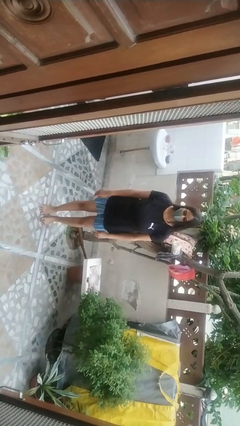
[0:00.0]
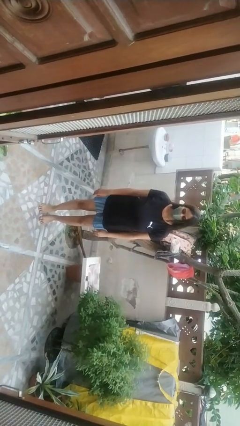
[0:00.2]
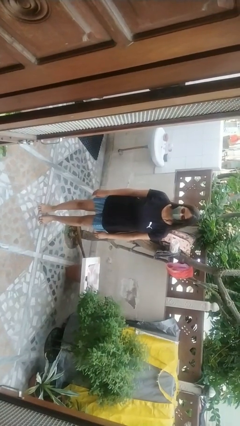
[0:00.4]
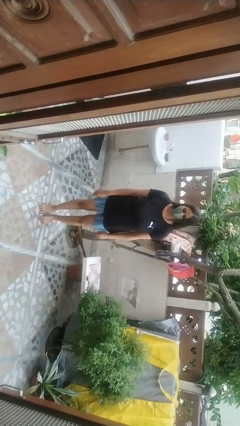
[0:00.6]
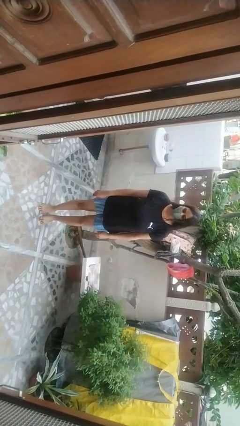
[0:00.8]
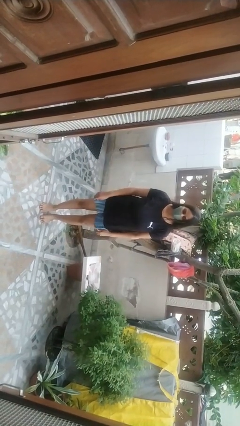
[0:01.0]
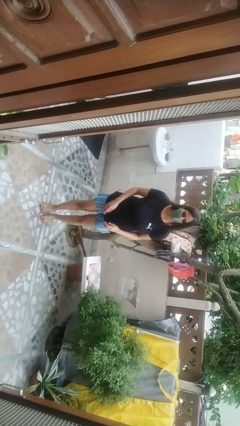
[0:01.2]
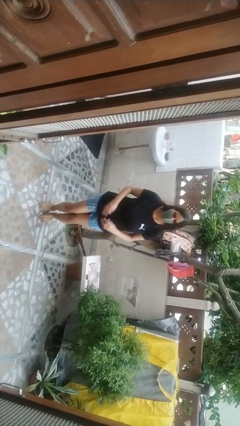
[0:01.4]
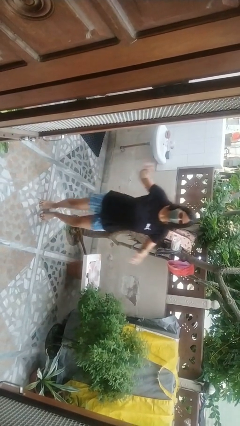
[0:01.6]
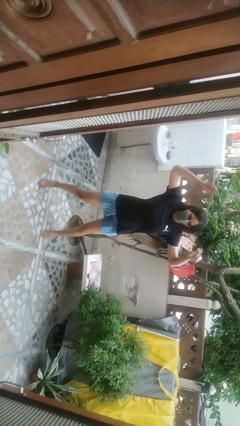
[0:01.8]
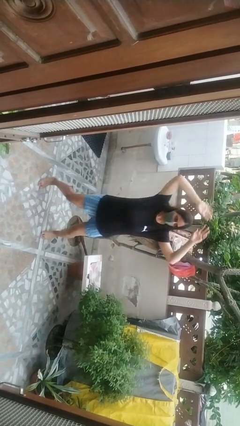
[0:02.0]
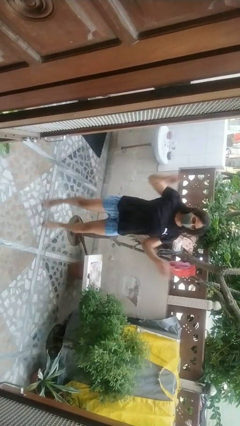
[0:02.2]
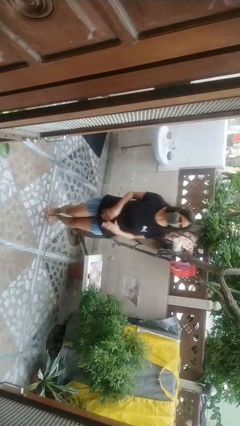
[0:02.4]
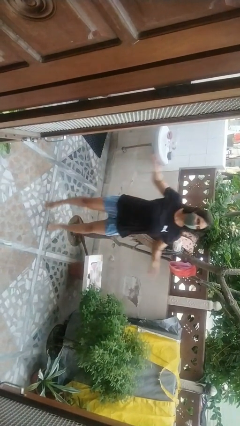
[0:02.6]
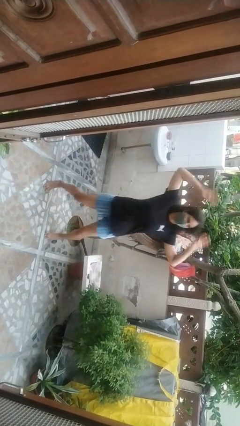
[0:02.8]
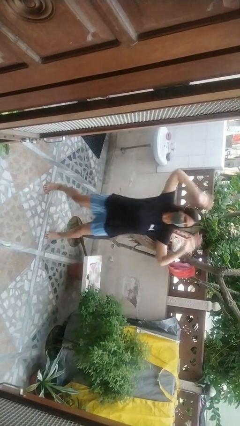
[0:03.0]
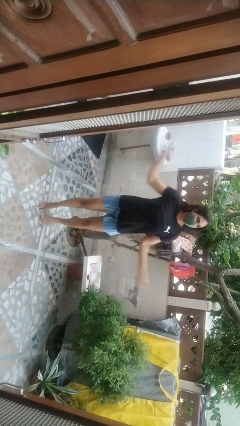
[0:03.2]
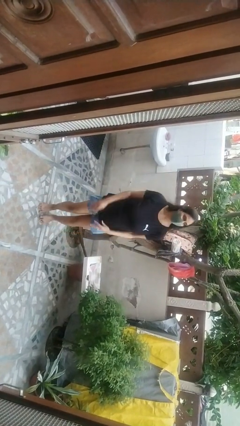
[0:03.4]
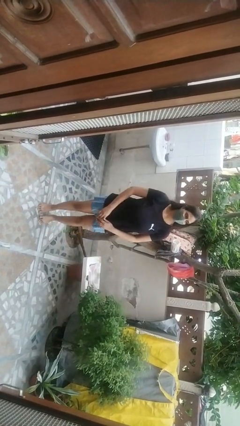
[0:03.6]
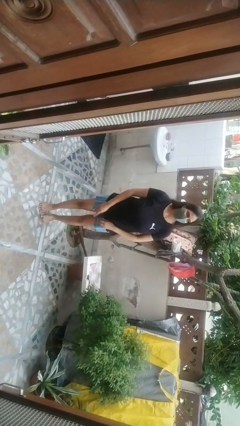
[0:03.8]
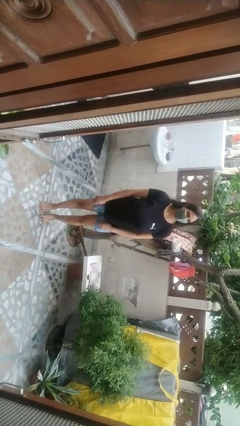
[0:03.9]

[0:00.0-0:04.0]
person exercises with jumping jacks

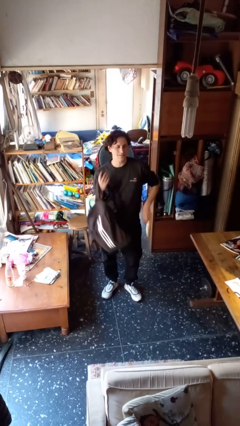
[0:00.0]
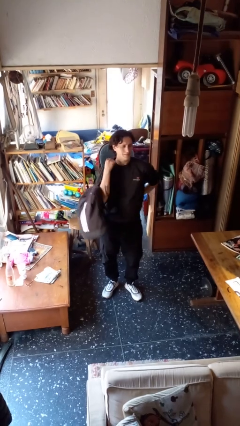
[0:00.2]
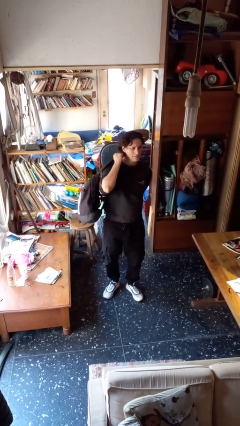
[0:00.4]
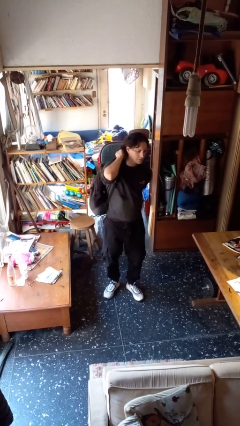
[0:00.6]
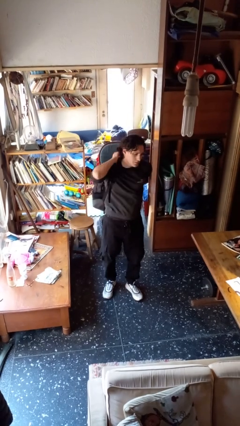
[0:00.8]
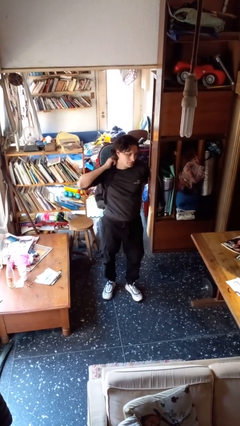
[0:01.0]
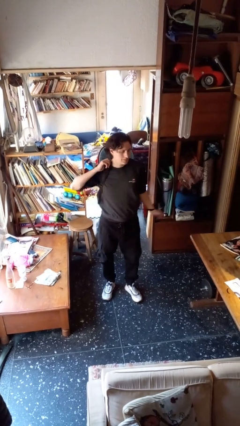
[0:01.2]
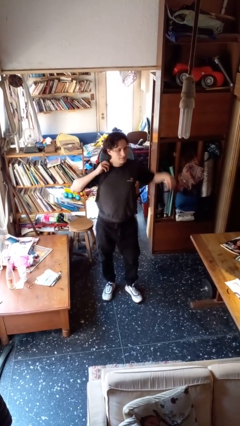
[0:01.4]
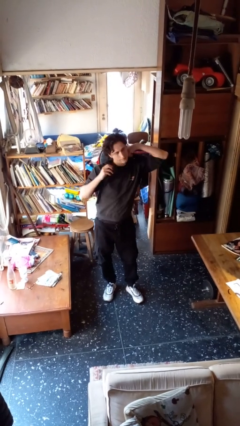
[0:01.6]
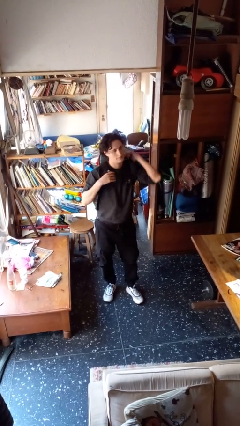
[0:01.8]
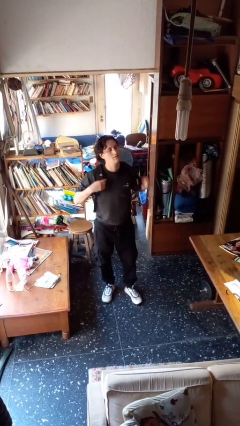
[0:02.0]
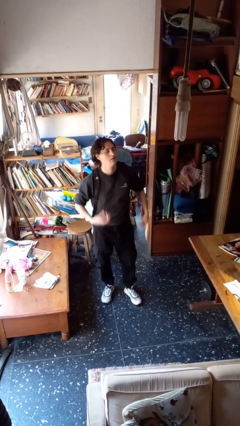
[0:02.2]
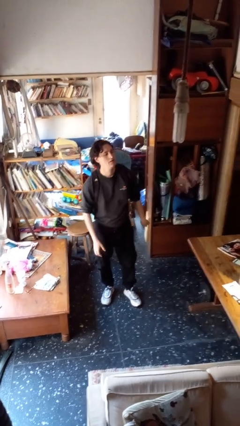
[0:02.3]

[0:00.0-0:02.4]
person puts on backpack

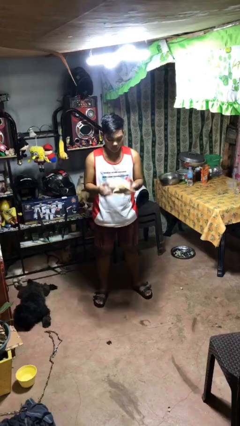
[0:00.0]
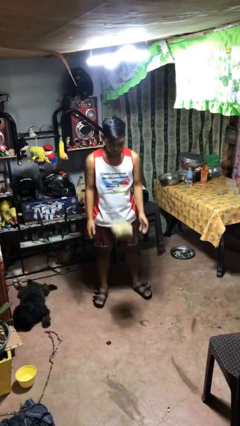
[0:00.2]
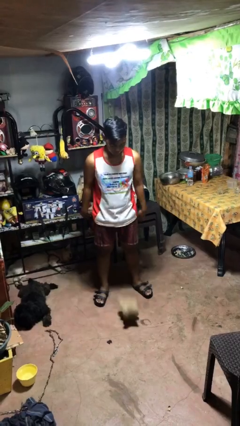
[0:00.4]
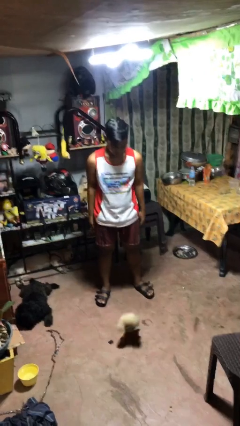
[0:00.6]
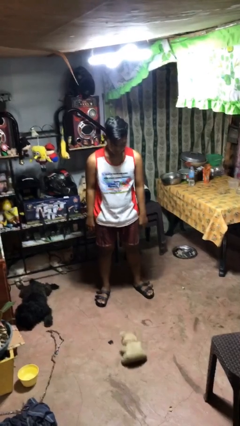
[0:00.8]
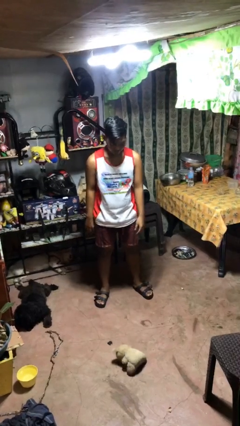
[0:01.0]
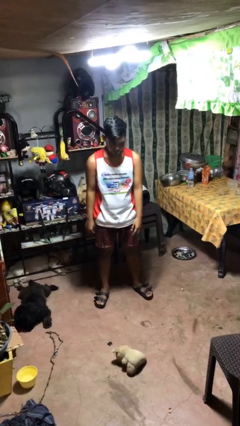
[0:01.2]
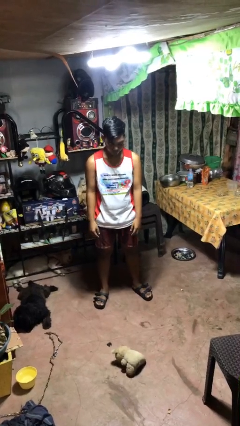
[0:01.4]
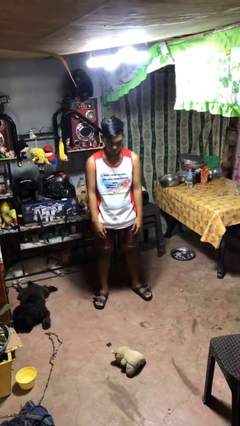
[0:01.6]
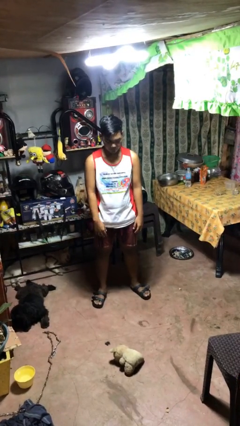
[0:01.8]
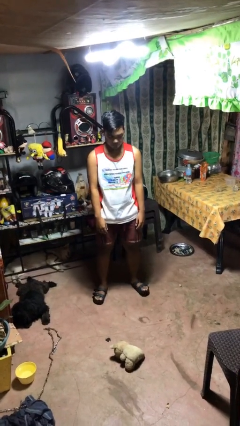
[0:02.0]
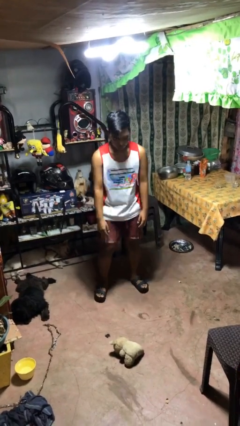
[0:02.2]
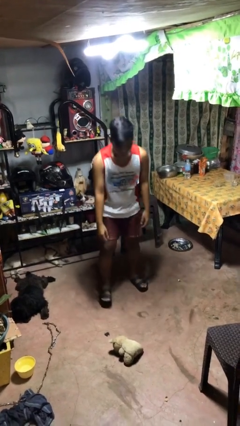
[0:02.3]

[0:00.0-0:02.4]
person drops object

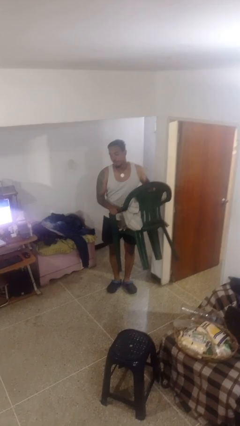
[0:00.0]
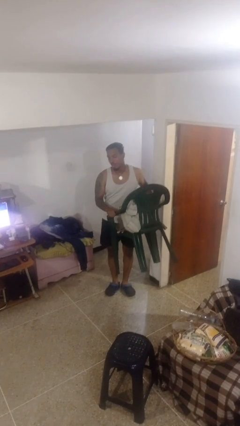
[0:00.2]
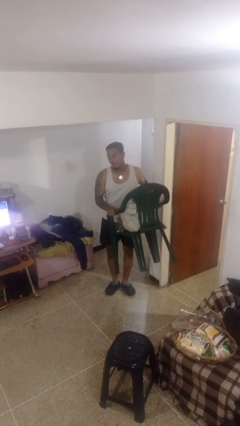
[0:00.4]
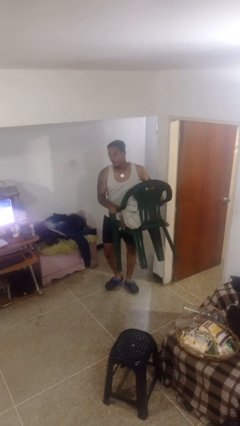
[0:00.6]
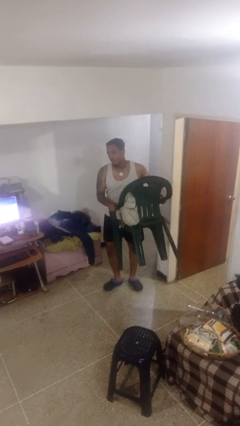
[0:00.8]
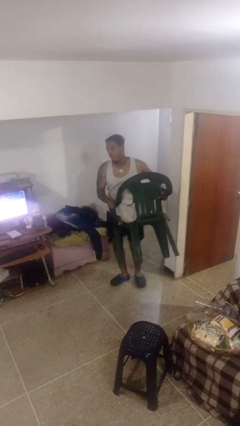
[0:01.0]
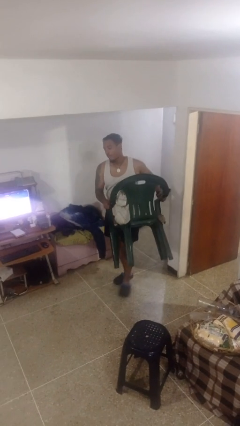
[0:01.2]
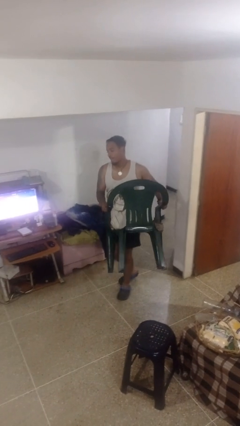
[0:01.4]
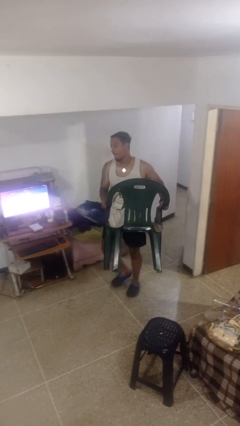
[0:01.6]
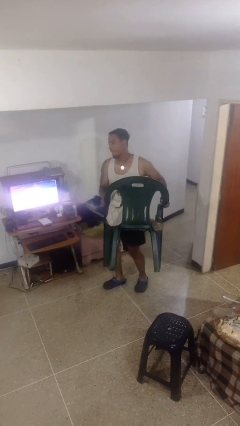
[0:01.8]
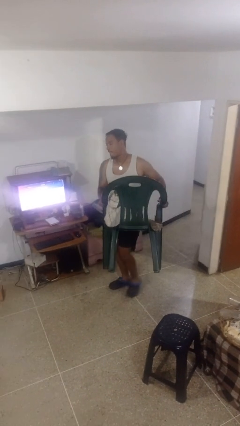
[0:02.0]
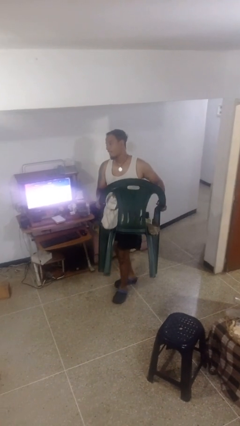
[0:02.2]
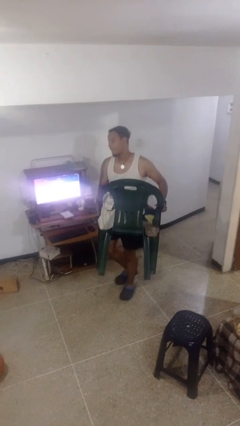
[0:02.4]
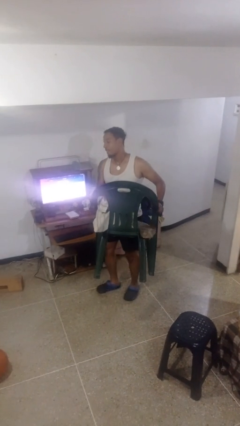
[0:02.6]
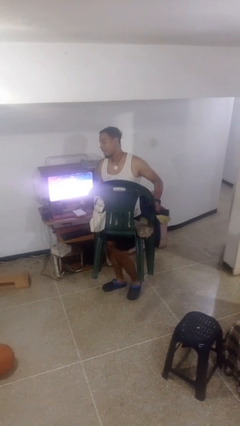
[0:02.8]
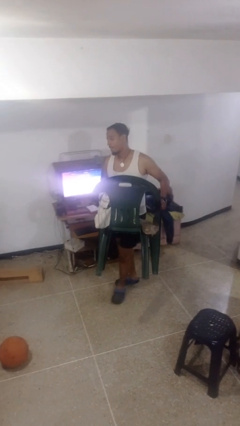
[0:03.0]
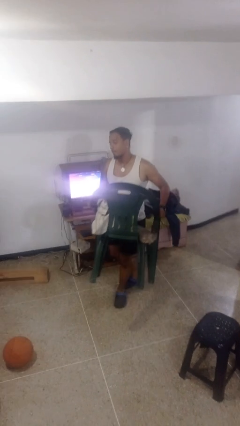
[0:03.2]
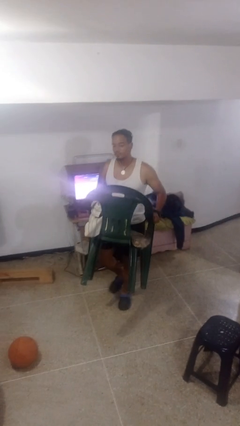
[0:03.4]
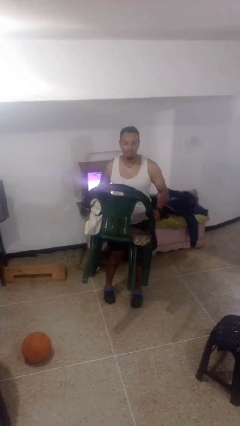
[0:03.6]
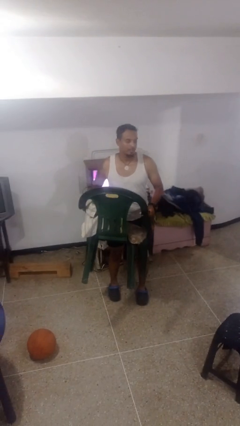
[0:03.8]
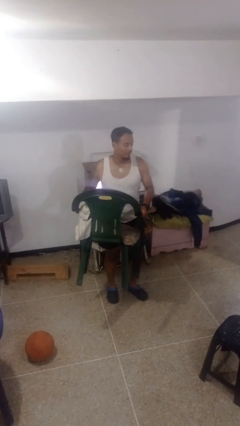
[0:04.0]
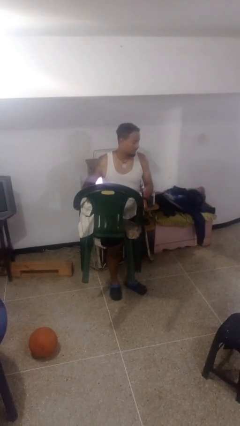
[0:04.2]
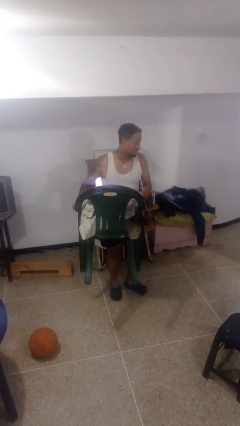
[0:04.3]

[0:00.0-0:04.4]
person carries furniture

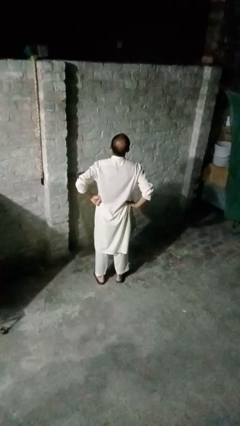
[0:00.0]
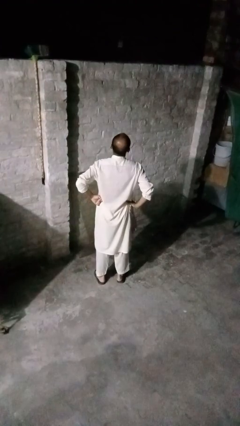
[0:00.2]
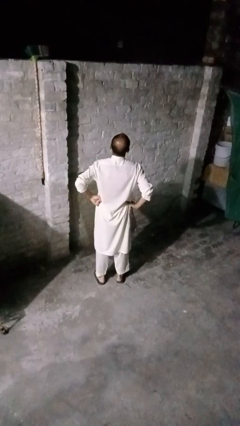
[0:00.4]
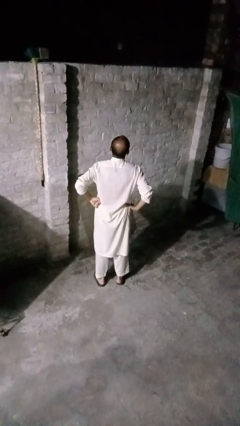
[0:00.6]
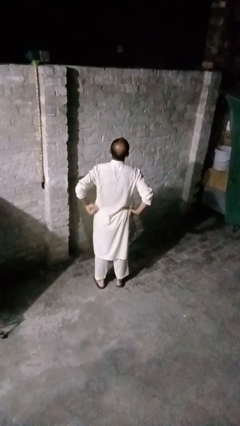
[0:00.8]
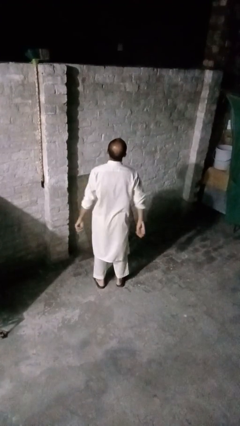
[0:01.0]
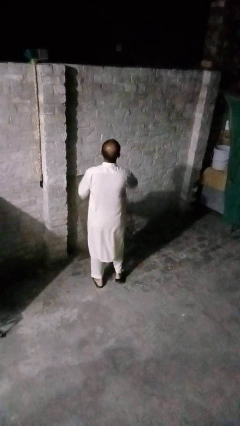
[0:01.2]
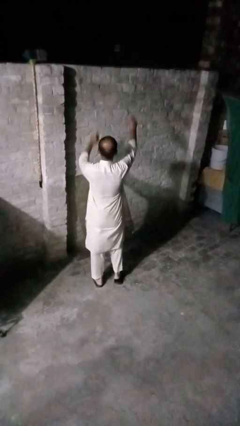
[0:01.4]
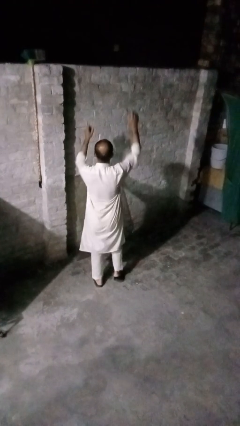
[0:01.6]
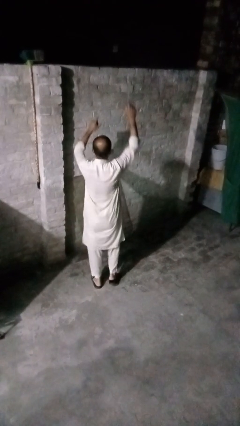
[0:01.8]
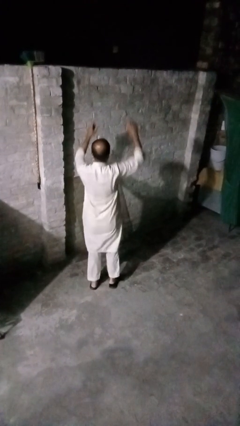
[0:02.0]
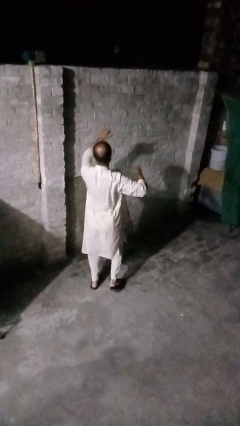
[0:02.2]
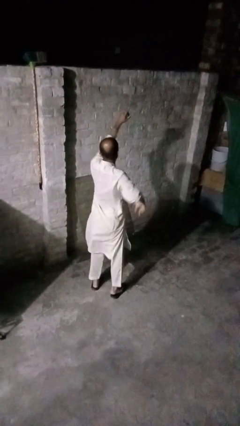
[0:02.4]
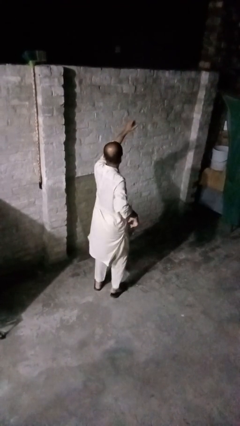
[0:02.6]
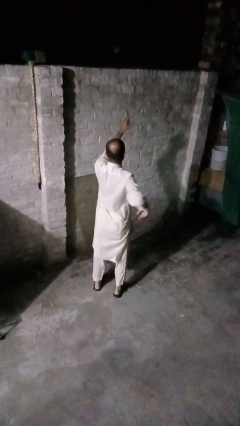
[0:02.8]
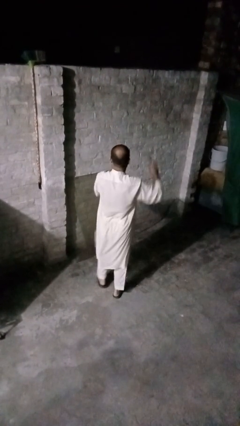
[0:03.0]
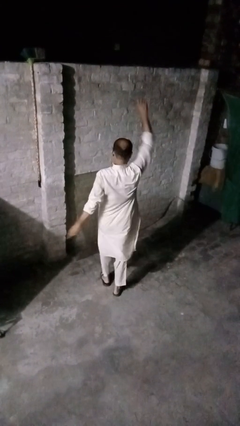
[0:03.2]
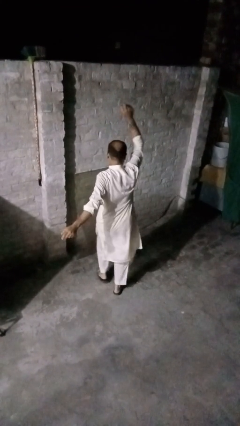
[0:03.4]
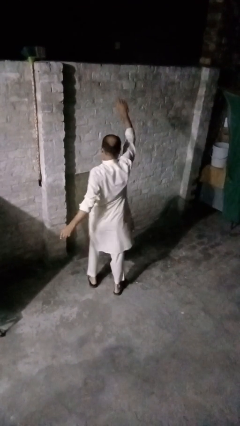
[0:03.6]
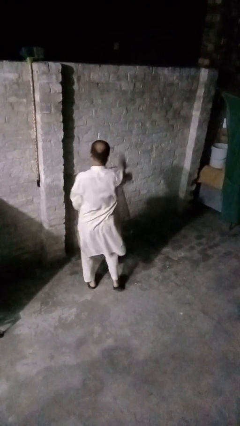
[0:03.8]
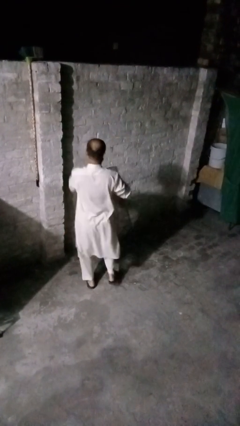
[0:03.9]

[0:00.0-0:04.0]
person dances in place

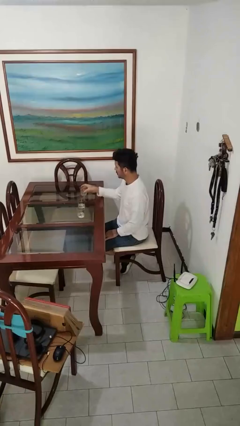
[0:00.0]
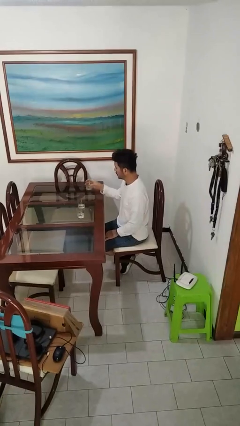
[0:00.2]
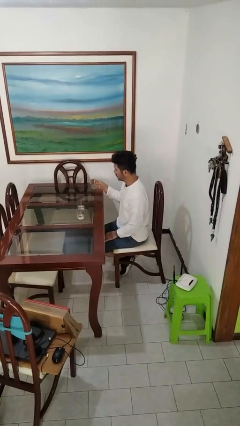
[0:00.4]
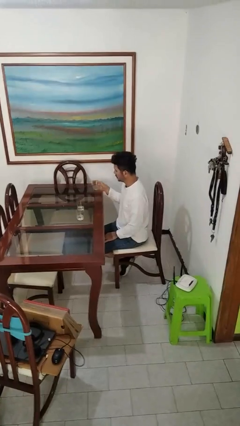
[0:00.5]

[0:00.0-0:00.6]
person picks up object from table
